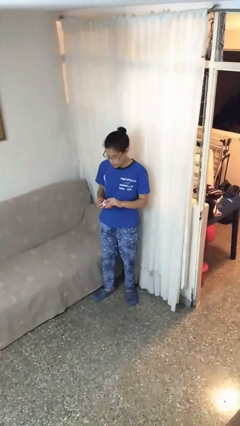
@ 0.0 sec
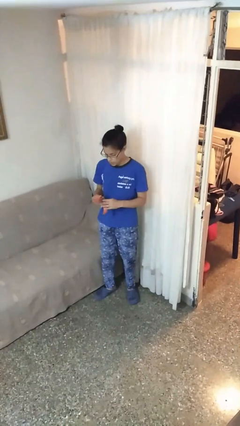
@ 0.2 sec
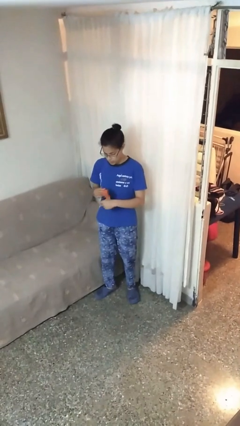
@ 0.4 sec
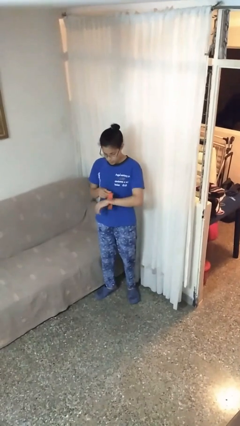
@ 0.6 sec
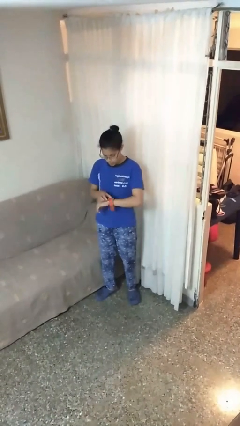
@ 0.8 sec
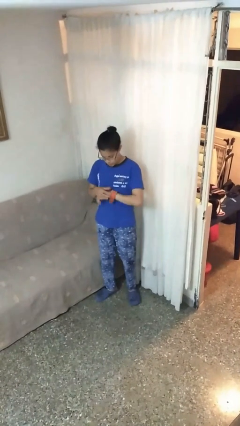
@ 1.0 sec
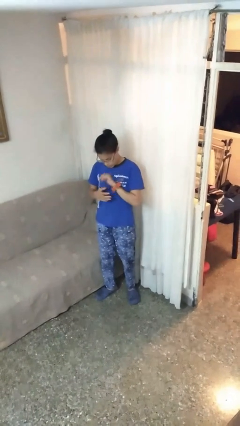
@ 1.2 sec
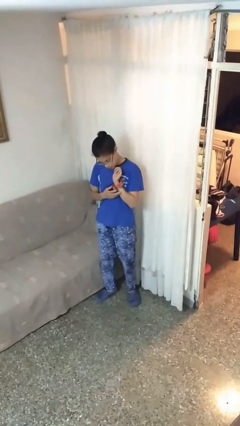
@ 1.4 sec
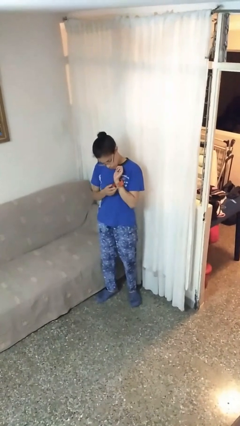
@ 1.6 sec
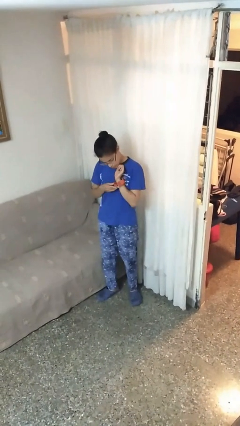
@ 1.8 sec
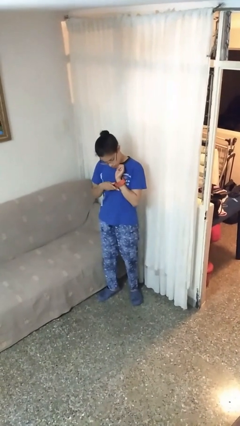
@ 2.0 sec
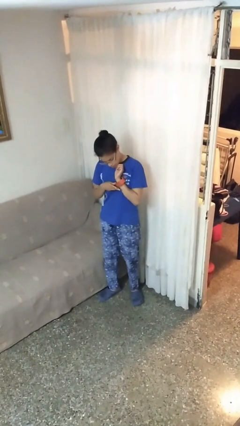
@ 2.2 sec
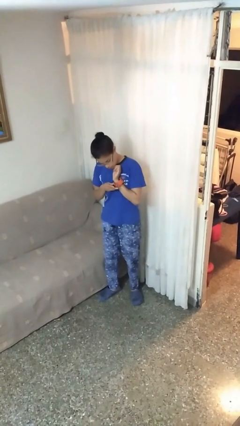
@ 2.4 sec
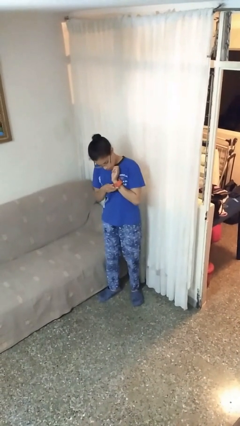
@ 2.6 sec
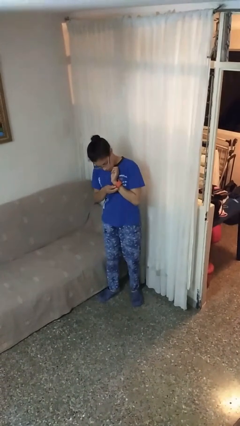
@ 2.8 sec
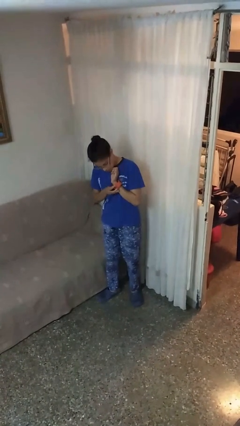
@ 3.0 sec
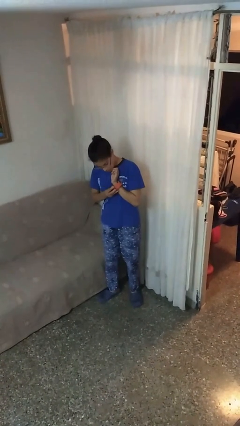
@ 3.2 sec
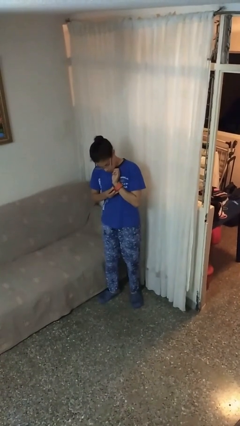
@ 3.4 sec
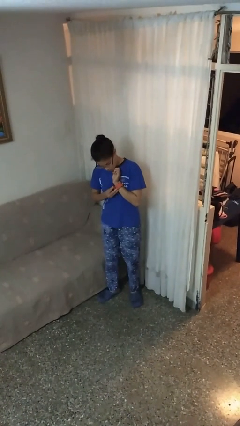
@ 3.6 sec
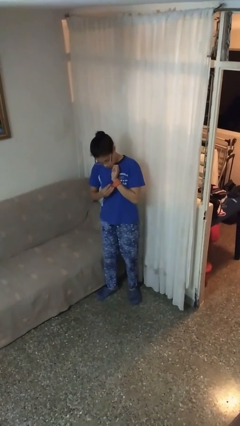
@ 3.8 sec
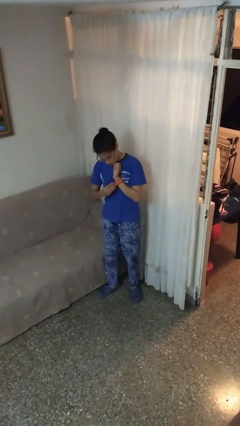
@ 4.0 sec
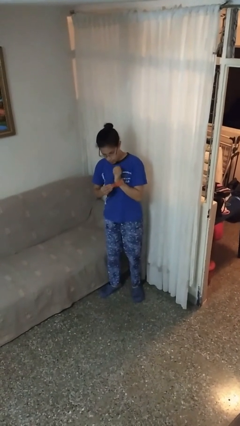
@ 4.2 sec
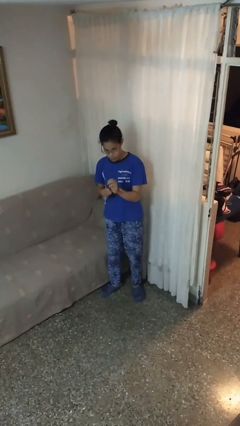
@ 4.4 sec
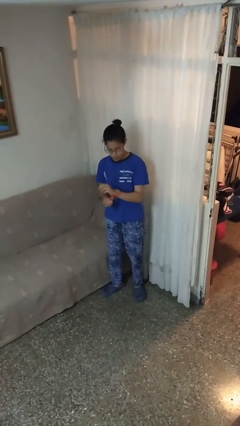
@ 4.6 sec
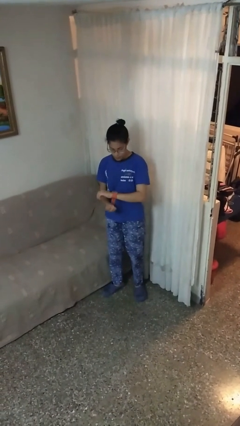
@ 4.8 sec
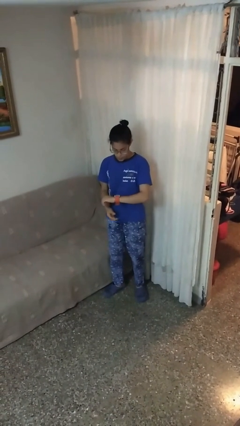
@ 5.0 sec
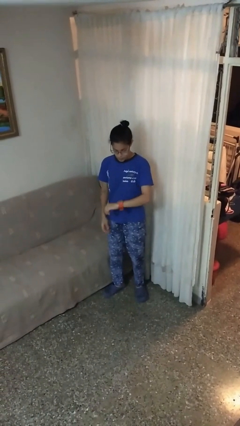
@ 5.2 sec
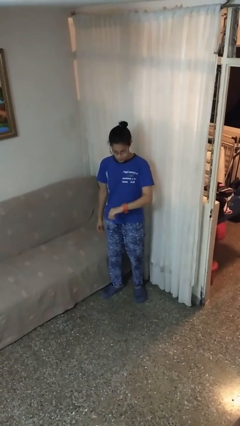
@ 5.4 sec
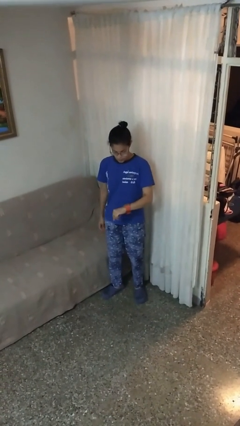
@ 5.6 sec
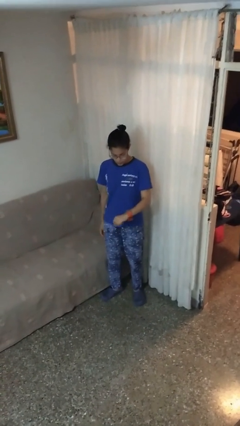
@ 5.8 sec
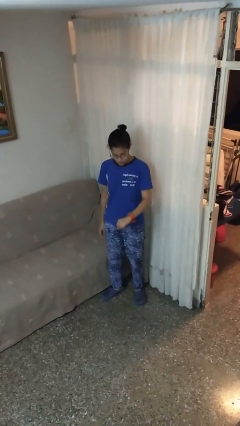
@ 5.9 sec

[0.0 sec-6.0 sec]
person puts on wristwatch

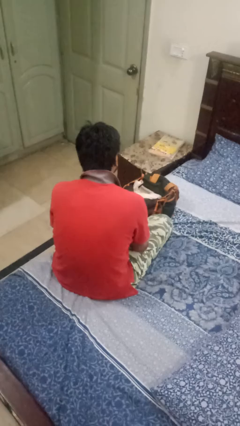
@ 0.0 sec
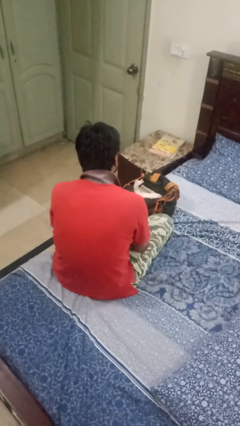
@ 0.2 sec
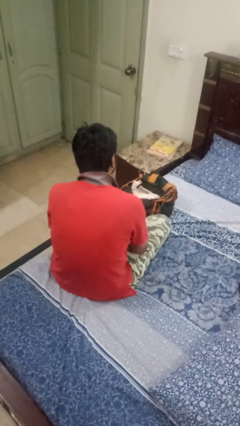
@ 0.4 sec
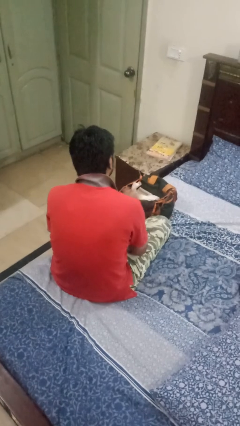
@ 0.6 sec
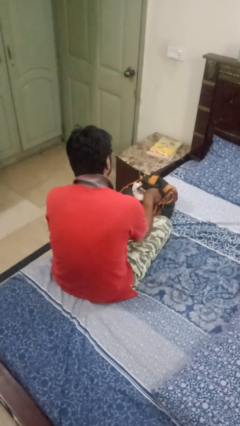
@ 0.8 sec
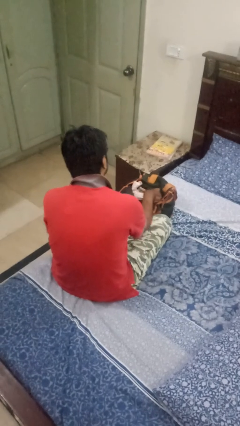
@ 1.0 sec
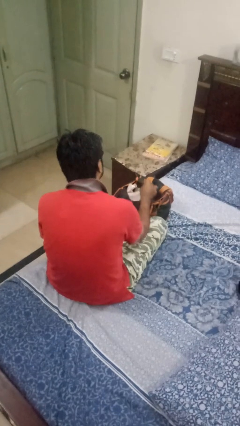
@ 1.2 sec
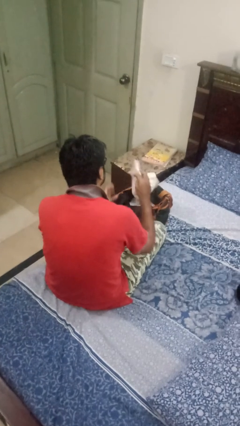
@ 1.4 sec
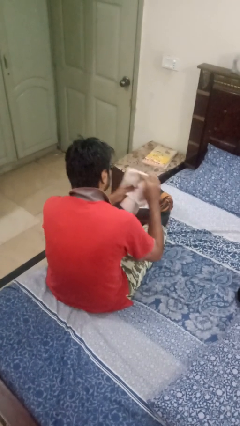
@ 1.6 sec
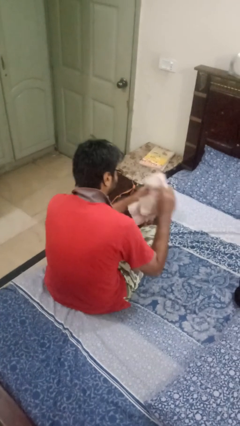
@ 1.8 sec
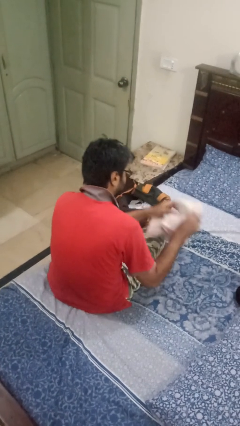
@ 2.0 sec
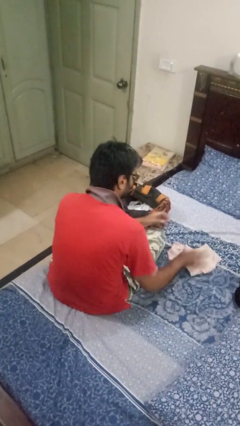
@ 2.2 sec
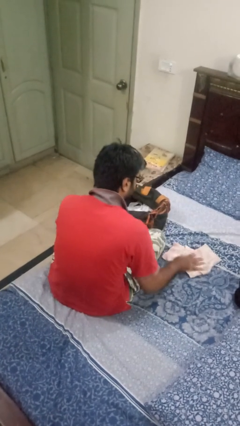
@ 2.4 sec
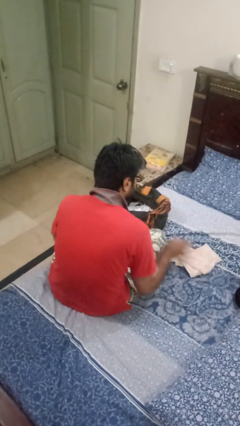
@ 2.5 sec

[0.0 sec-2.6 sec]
person takes object from bag

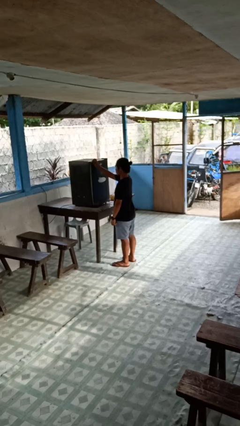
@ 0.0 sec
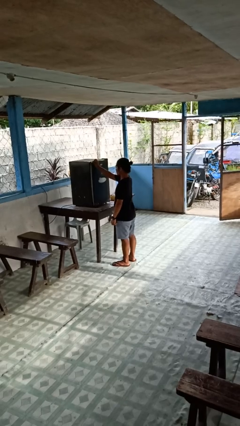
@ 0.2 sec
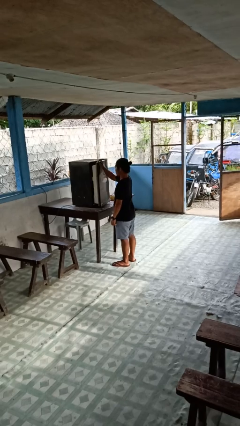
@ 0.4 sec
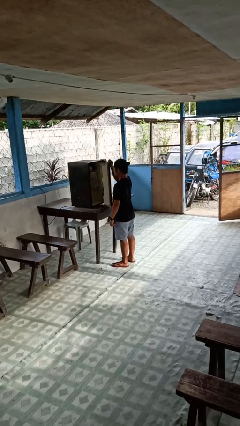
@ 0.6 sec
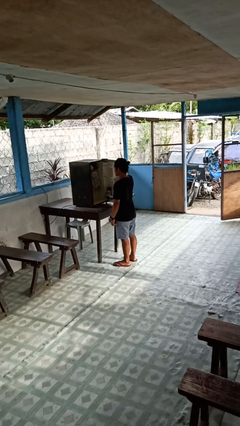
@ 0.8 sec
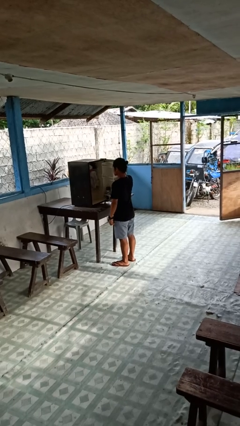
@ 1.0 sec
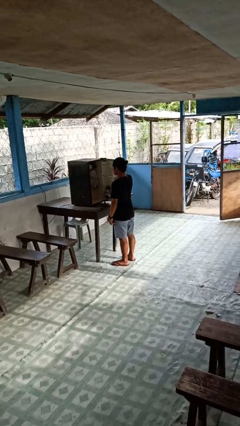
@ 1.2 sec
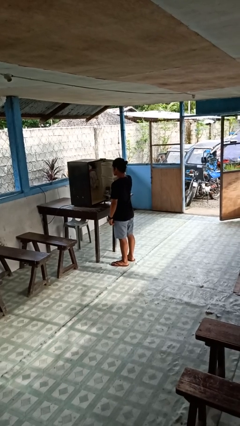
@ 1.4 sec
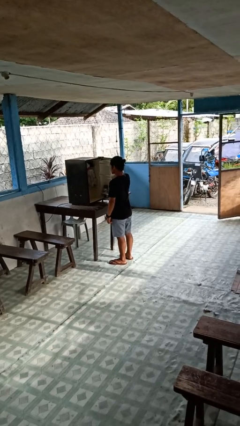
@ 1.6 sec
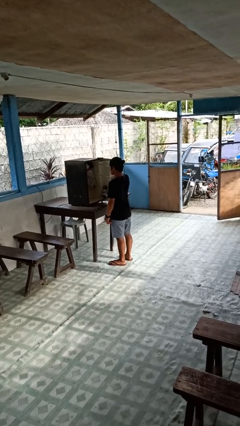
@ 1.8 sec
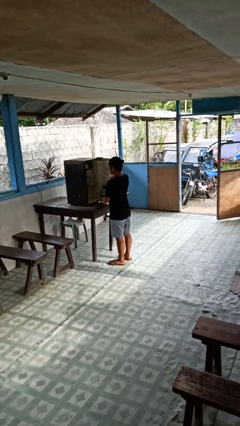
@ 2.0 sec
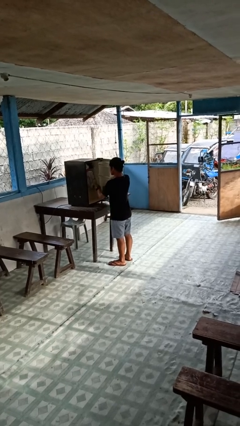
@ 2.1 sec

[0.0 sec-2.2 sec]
person opens refrigerator

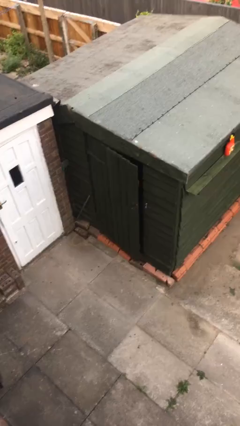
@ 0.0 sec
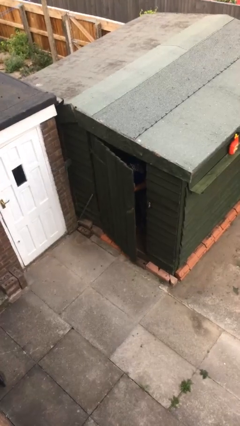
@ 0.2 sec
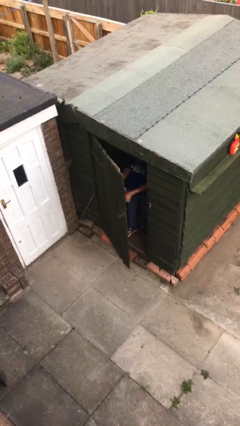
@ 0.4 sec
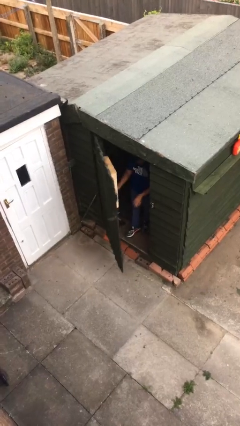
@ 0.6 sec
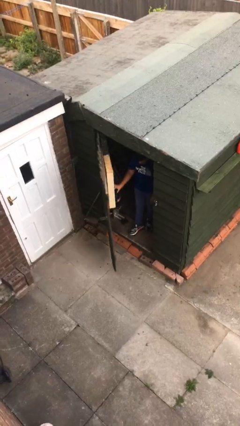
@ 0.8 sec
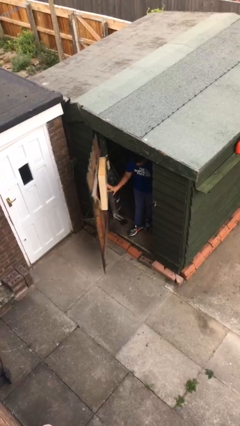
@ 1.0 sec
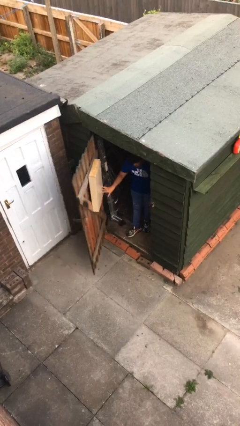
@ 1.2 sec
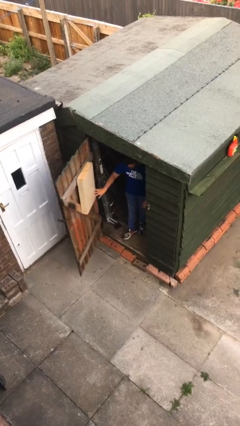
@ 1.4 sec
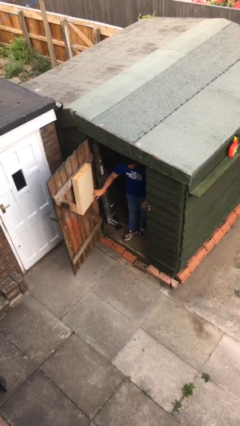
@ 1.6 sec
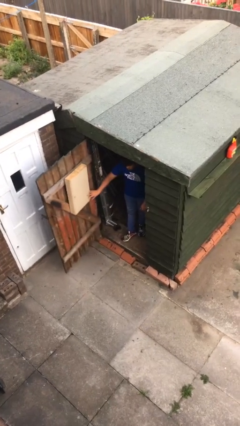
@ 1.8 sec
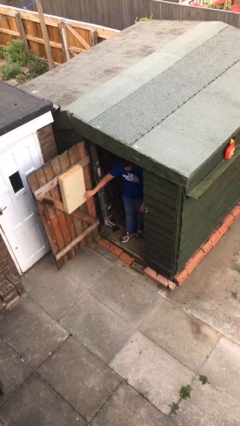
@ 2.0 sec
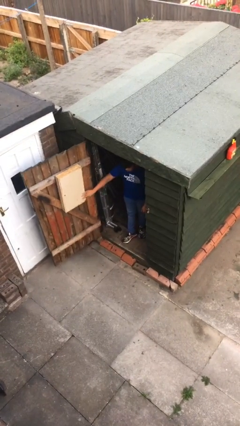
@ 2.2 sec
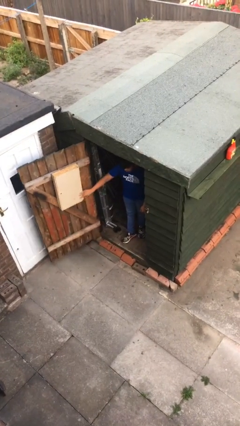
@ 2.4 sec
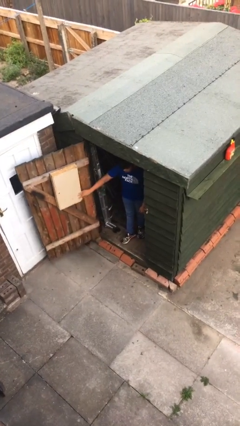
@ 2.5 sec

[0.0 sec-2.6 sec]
person opens facility door

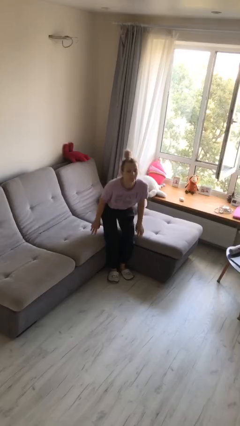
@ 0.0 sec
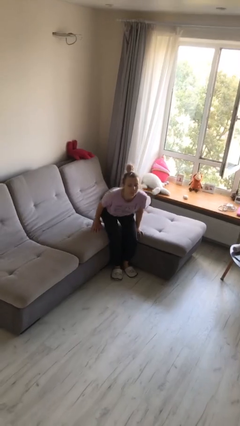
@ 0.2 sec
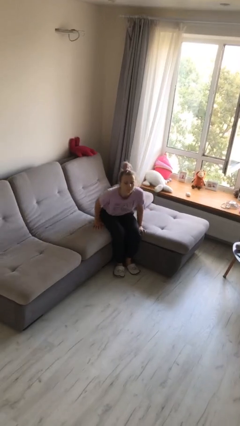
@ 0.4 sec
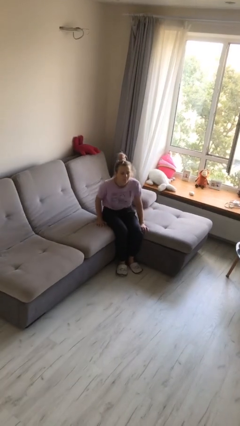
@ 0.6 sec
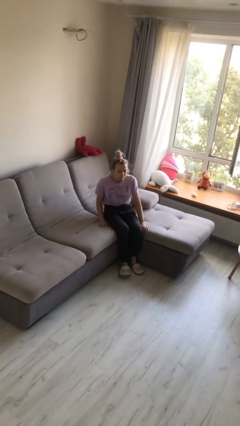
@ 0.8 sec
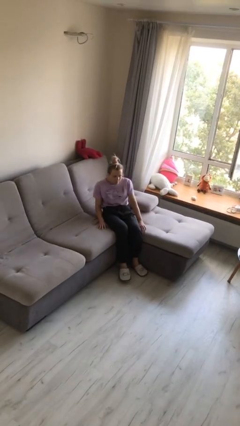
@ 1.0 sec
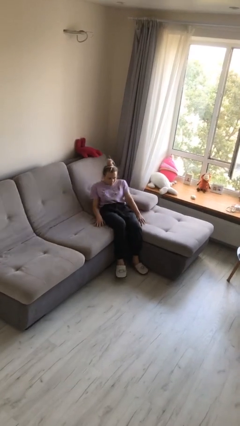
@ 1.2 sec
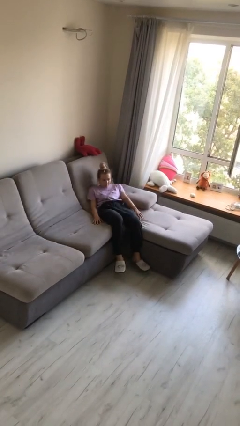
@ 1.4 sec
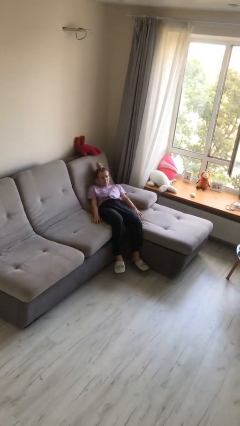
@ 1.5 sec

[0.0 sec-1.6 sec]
person lies down on couch

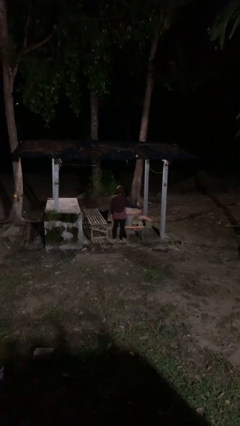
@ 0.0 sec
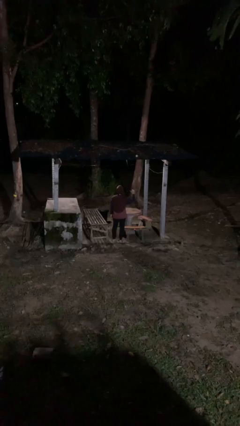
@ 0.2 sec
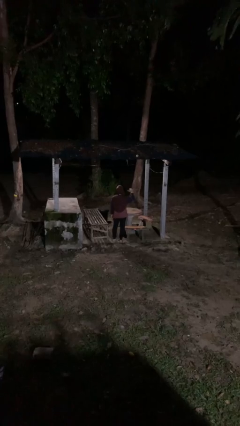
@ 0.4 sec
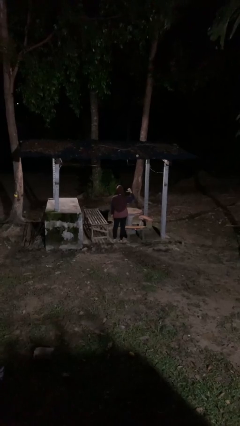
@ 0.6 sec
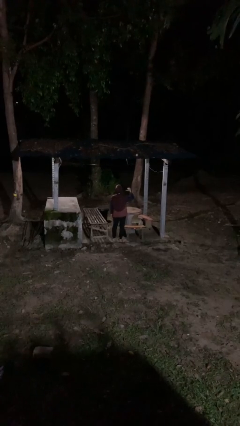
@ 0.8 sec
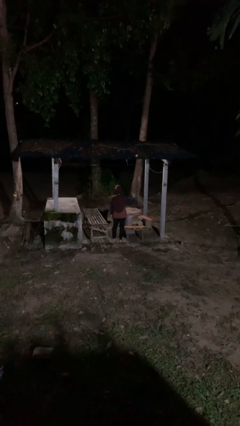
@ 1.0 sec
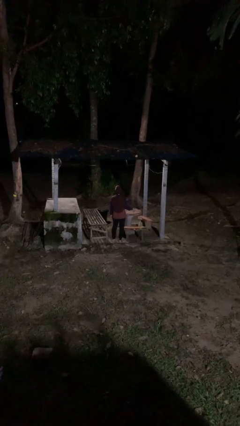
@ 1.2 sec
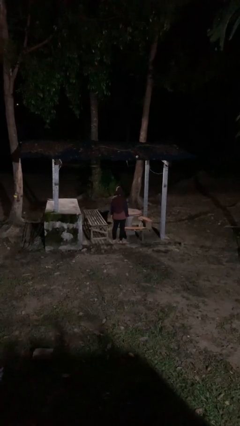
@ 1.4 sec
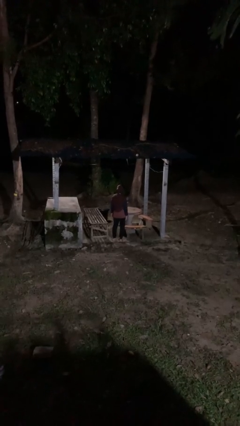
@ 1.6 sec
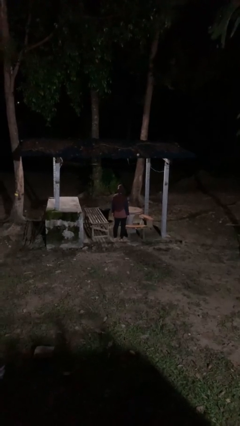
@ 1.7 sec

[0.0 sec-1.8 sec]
person gestures behind me

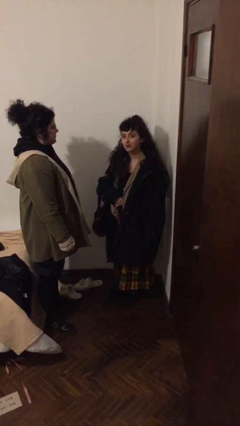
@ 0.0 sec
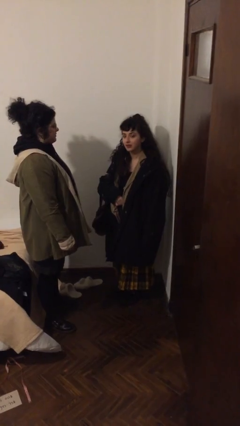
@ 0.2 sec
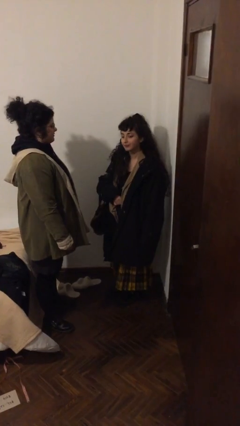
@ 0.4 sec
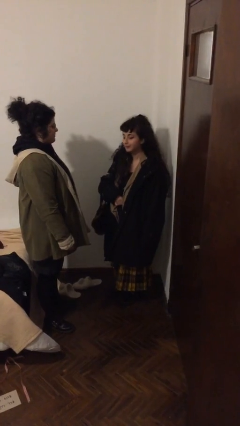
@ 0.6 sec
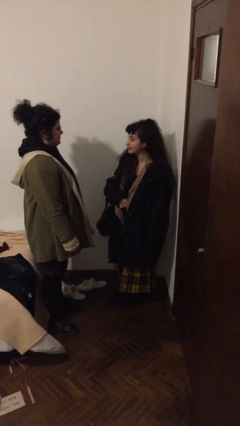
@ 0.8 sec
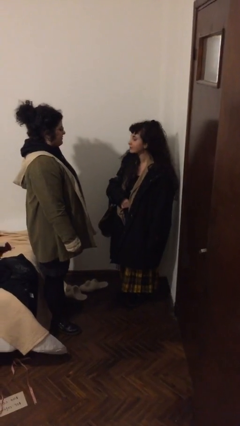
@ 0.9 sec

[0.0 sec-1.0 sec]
person kisses cheek of person
